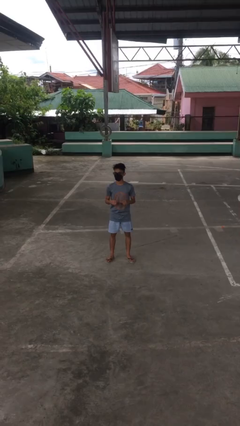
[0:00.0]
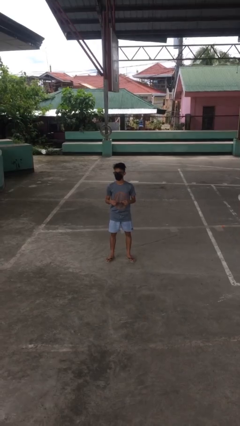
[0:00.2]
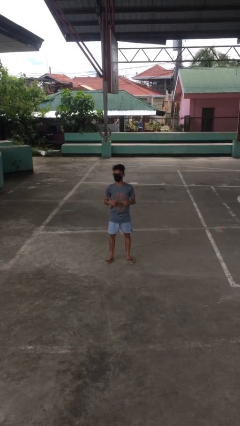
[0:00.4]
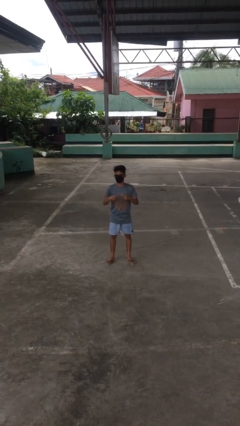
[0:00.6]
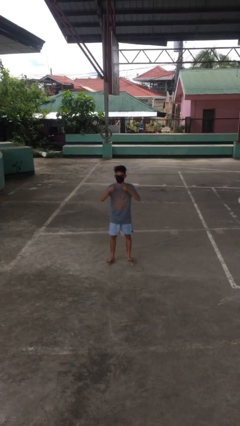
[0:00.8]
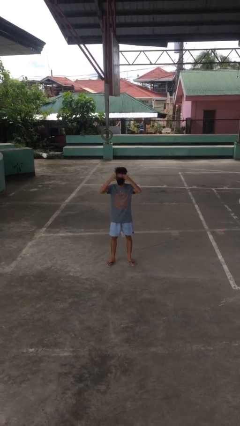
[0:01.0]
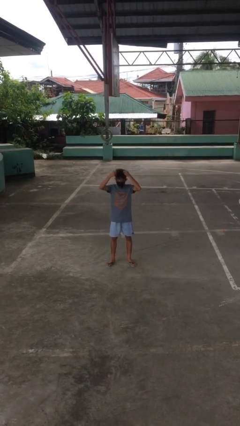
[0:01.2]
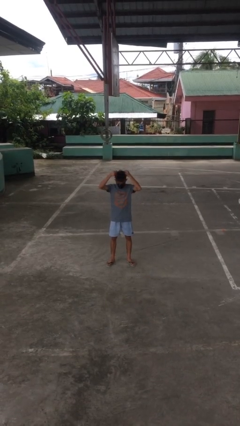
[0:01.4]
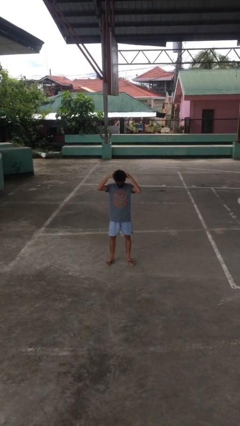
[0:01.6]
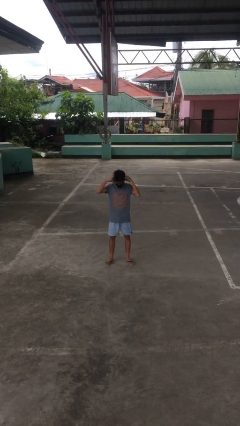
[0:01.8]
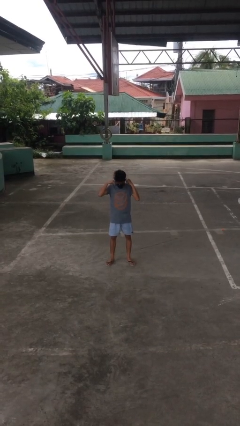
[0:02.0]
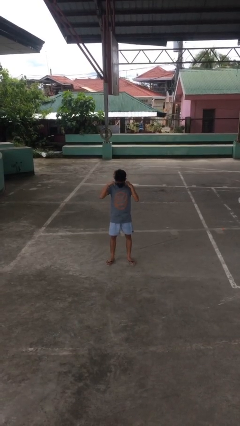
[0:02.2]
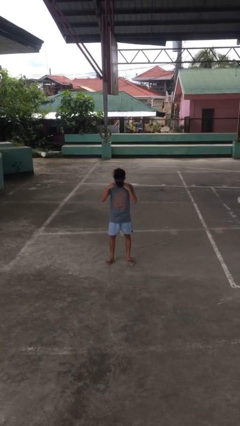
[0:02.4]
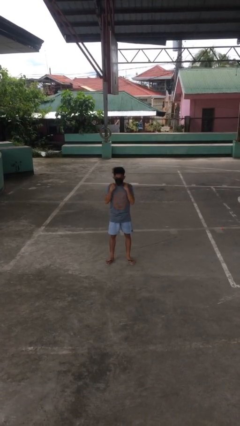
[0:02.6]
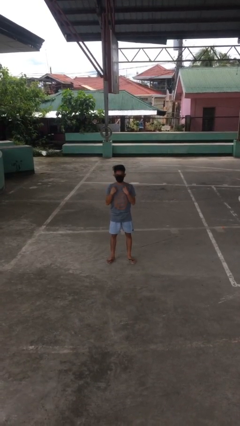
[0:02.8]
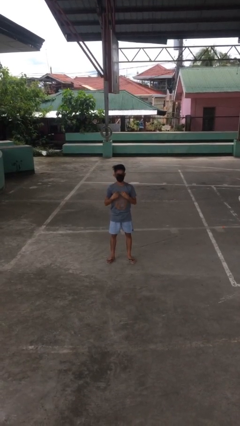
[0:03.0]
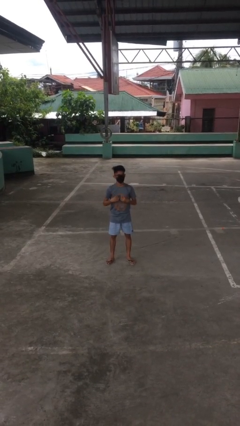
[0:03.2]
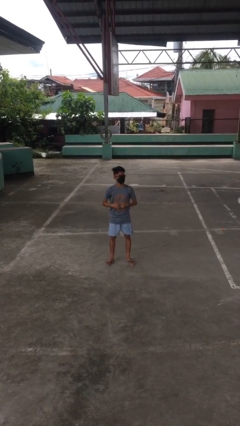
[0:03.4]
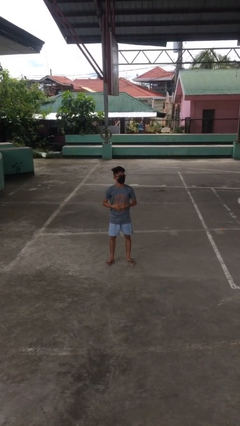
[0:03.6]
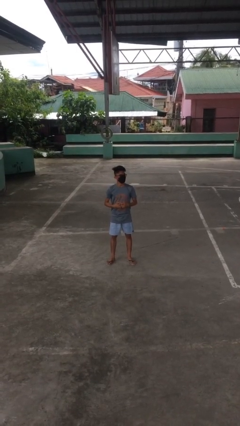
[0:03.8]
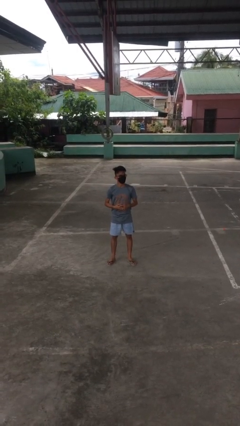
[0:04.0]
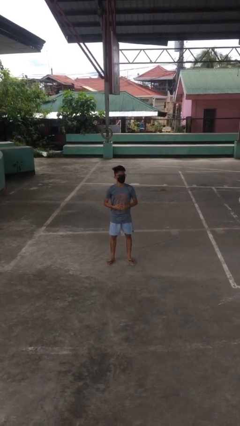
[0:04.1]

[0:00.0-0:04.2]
person puts on necklace

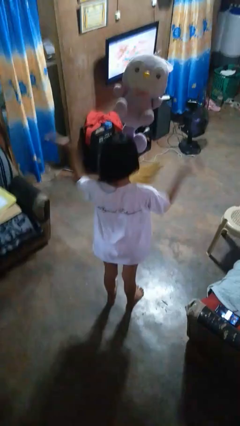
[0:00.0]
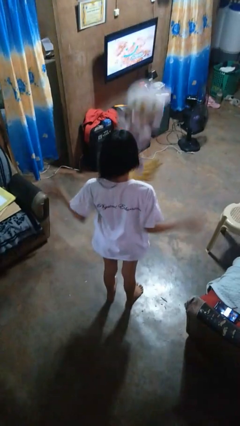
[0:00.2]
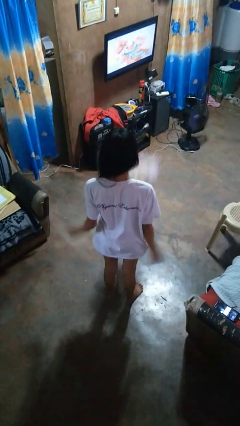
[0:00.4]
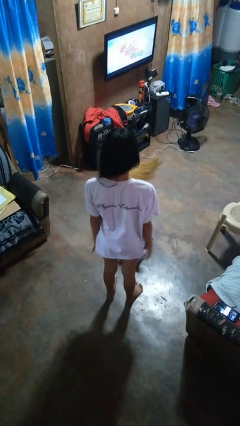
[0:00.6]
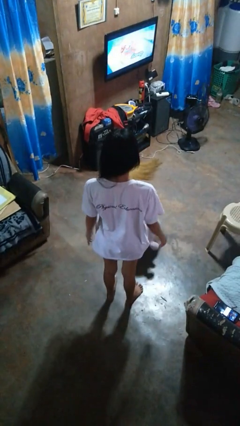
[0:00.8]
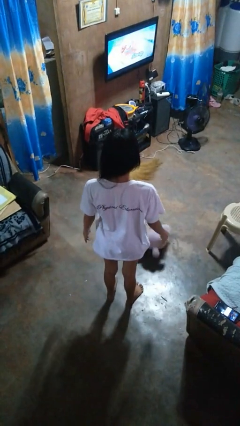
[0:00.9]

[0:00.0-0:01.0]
person throws object into air

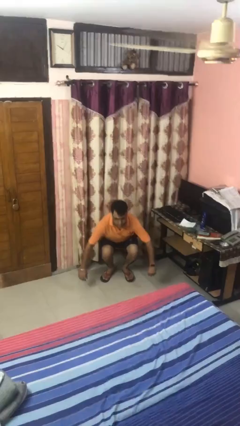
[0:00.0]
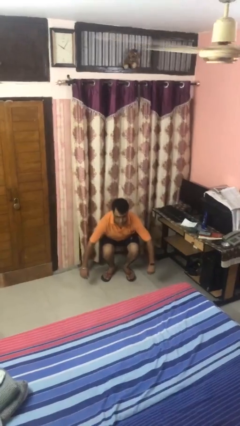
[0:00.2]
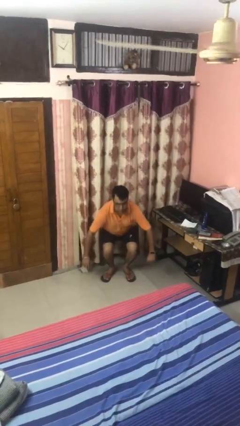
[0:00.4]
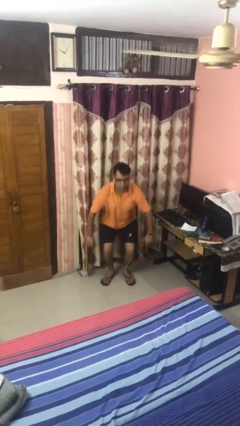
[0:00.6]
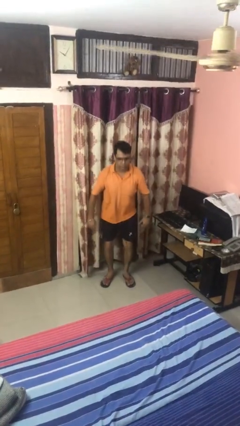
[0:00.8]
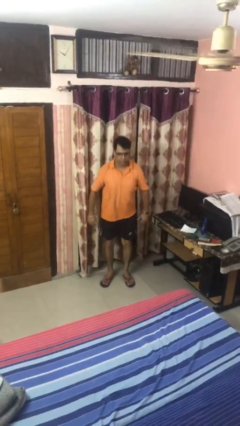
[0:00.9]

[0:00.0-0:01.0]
person stands up

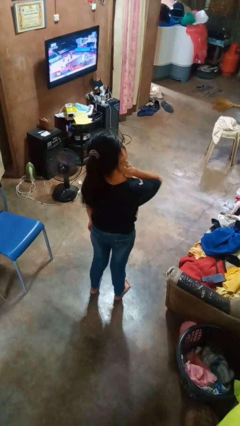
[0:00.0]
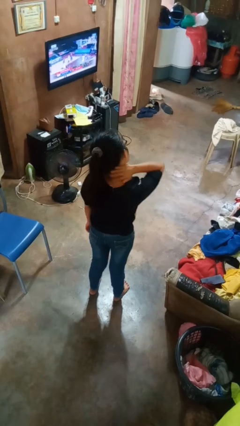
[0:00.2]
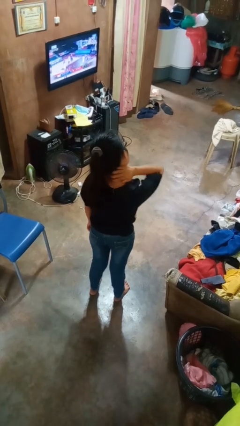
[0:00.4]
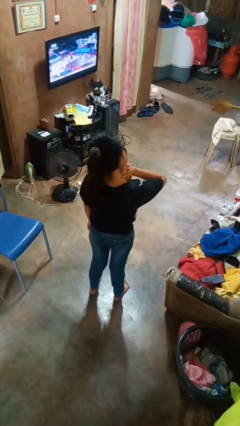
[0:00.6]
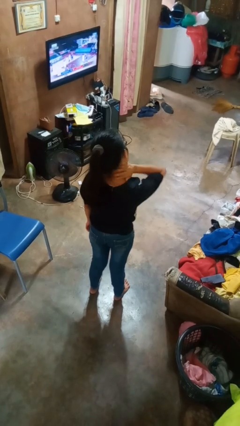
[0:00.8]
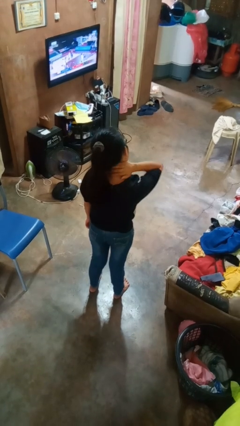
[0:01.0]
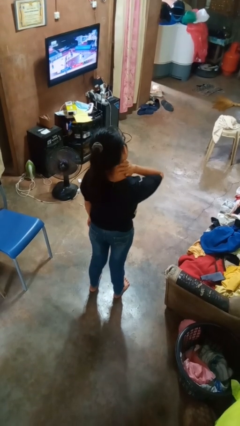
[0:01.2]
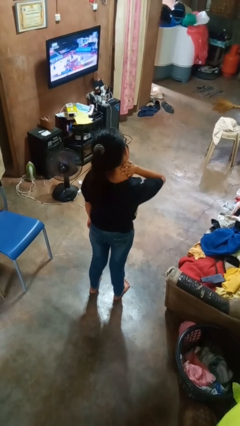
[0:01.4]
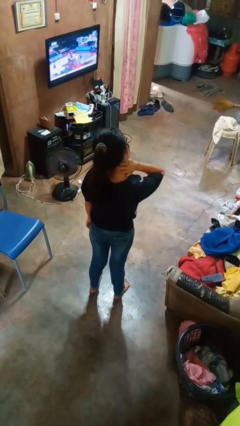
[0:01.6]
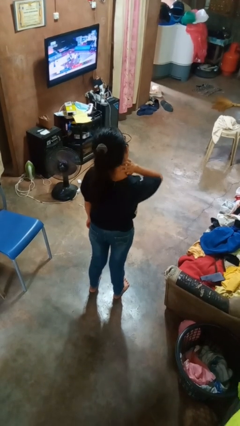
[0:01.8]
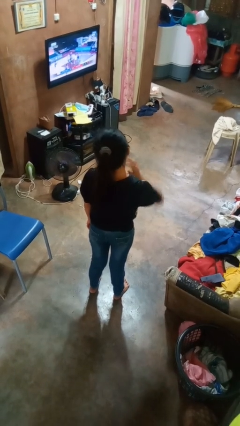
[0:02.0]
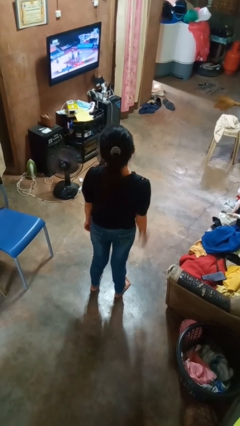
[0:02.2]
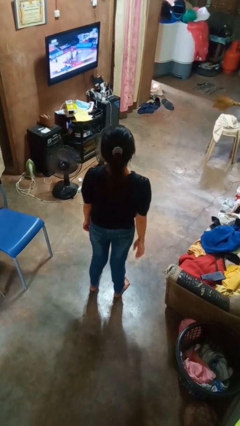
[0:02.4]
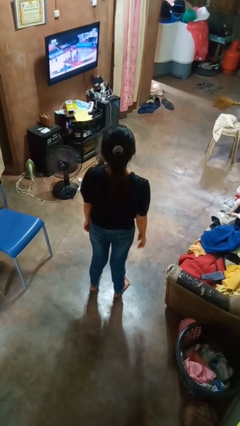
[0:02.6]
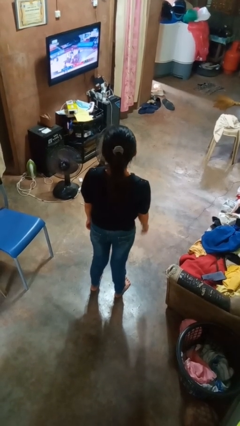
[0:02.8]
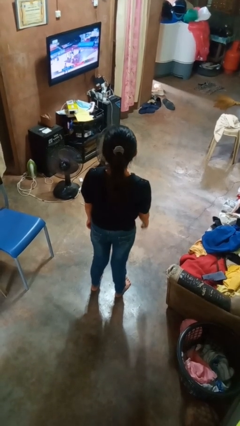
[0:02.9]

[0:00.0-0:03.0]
person rubs neck

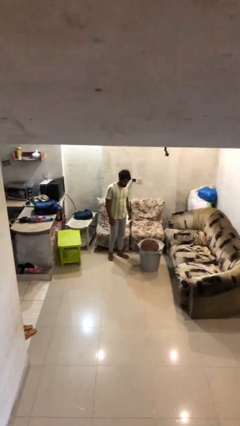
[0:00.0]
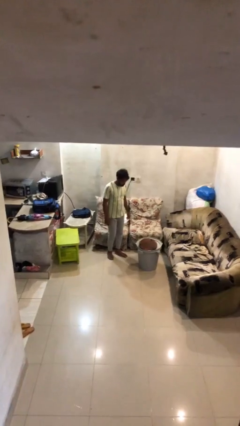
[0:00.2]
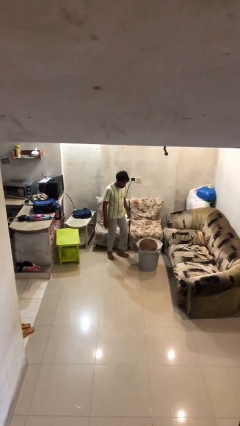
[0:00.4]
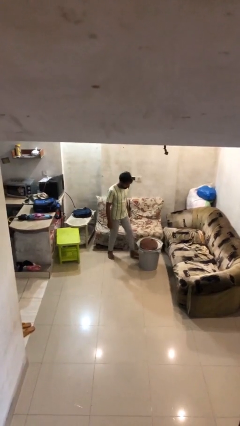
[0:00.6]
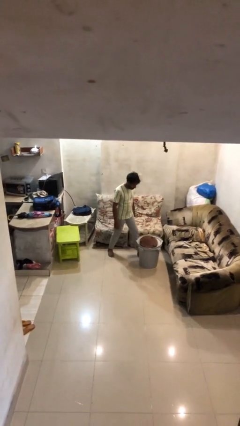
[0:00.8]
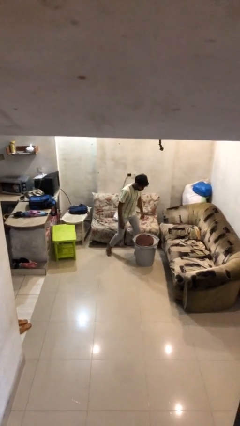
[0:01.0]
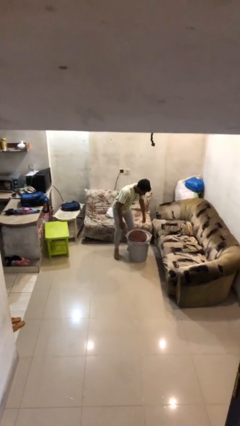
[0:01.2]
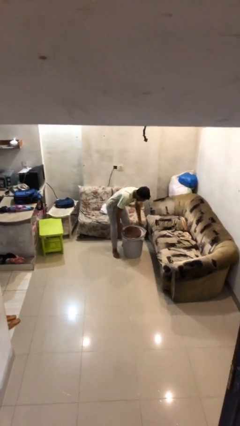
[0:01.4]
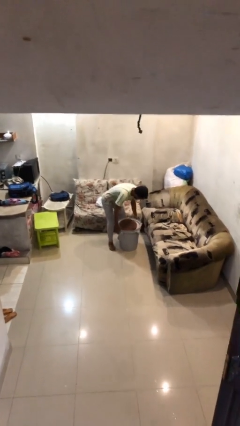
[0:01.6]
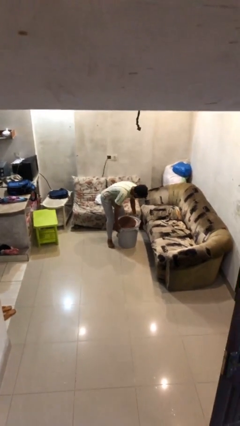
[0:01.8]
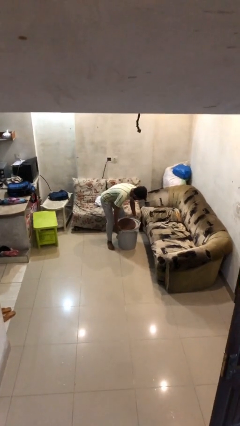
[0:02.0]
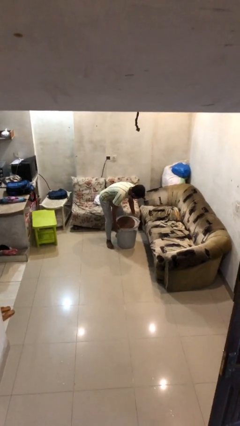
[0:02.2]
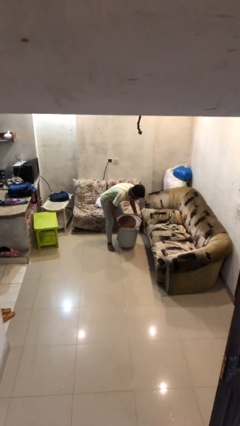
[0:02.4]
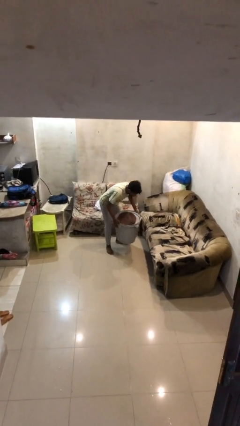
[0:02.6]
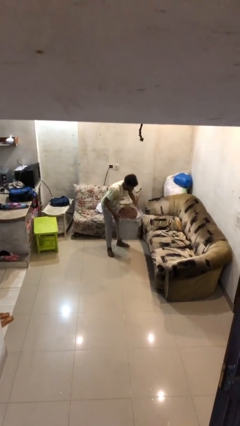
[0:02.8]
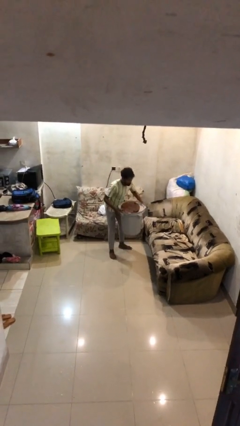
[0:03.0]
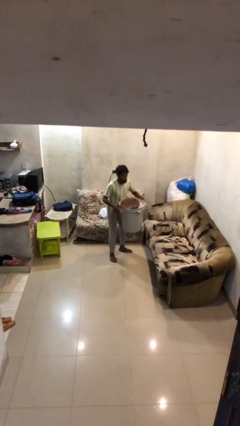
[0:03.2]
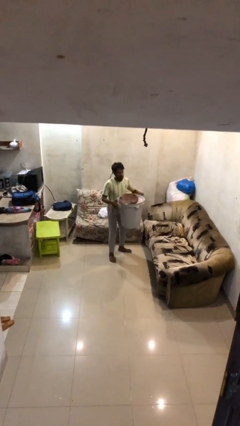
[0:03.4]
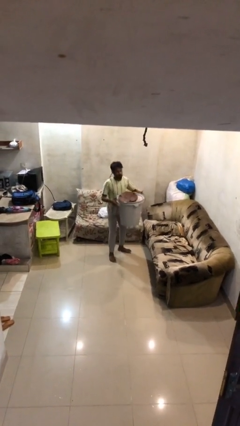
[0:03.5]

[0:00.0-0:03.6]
person picks up object from floor

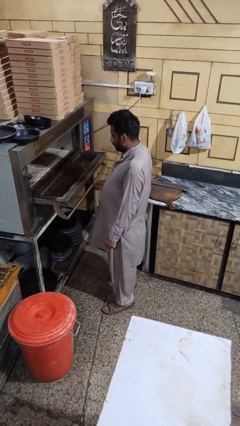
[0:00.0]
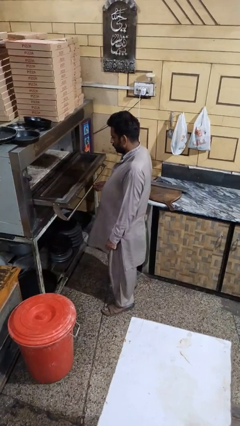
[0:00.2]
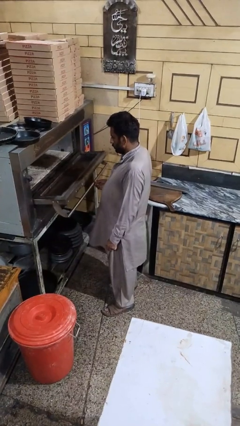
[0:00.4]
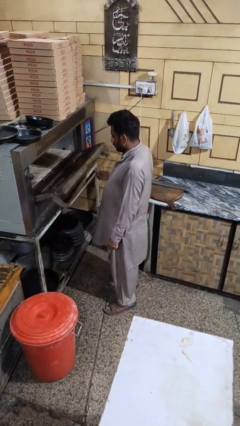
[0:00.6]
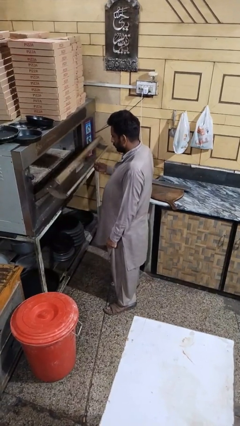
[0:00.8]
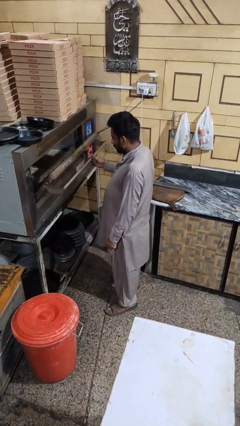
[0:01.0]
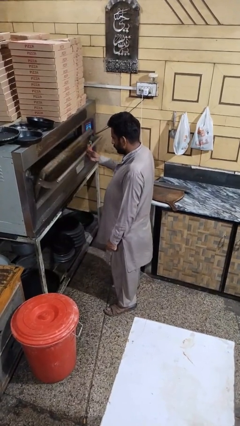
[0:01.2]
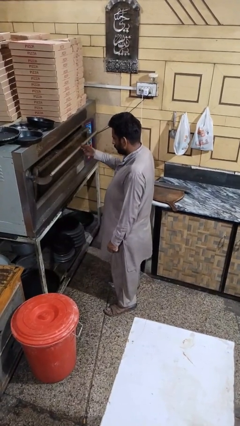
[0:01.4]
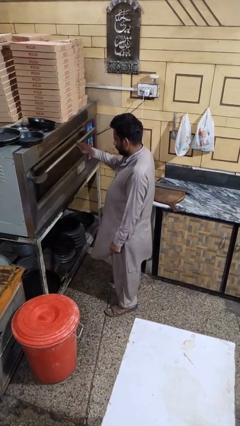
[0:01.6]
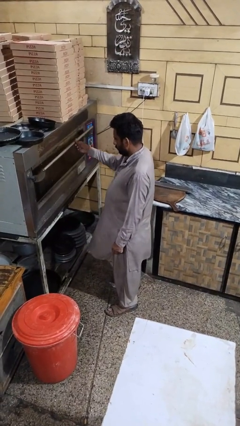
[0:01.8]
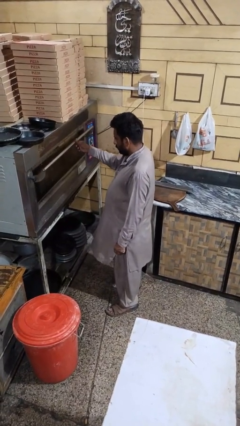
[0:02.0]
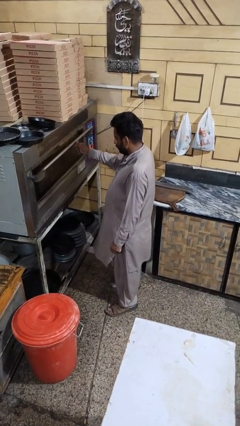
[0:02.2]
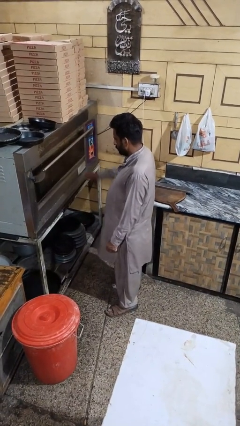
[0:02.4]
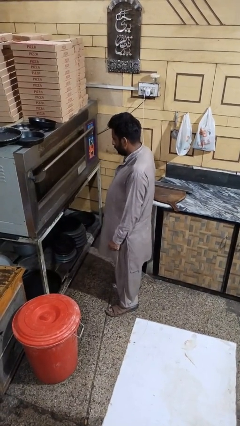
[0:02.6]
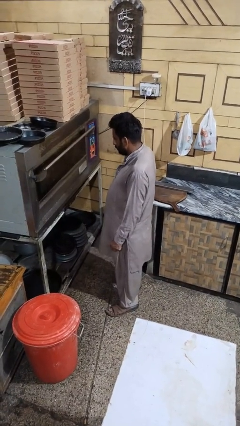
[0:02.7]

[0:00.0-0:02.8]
person closes microwave

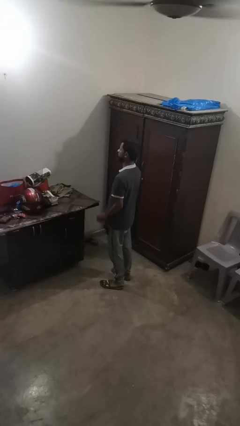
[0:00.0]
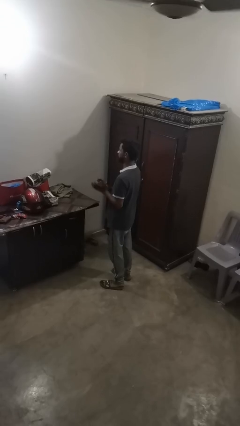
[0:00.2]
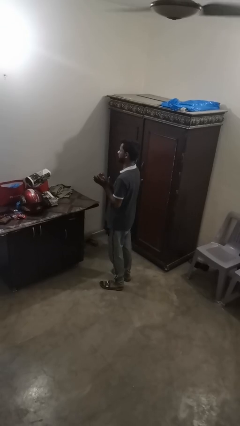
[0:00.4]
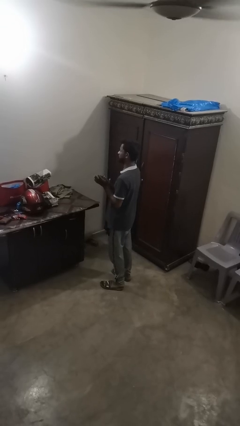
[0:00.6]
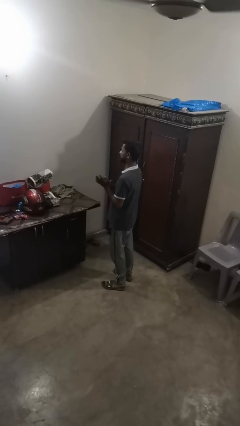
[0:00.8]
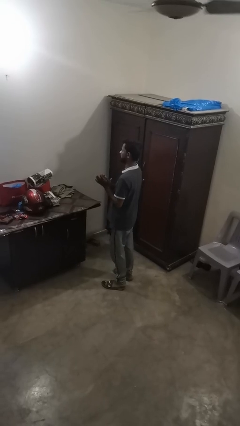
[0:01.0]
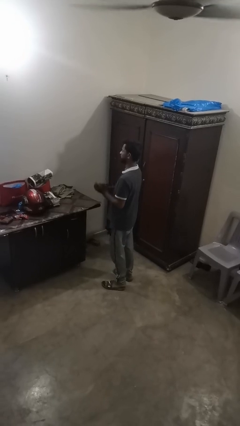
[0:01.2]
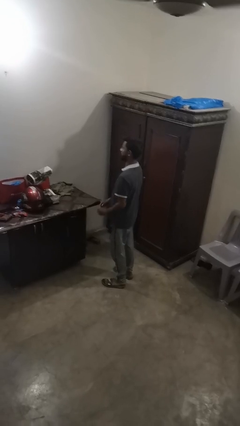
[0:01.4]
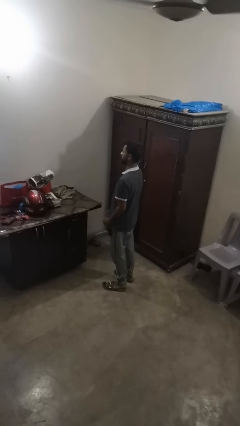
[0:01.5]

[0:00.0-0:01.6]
person claps hands
